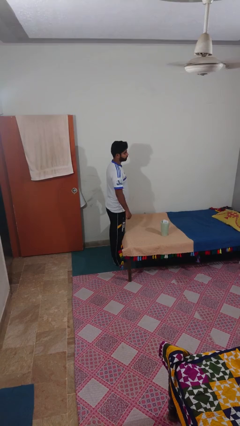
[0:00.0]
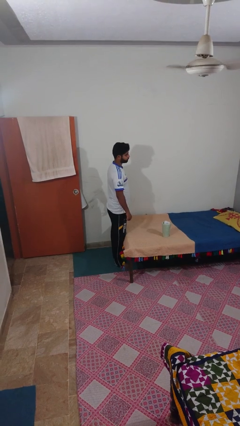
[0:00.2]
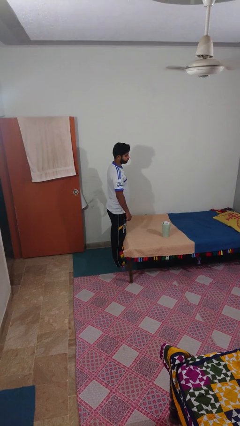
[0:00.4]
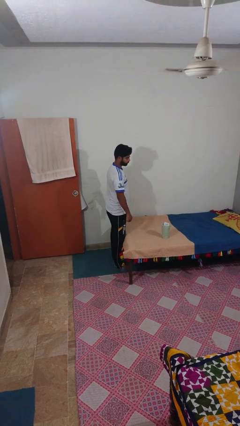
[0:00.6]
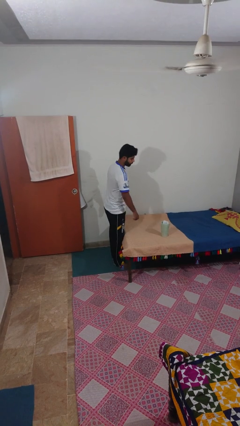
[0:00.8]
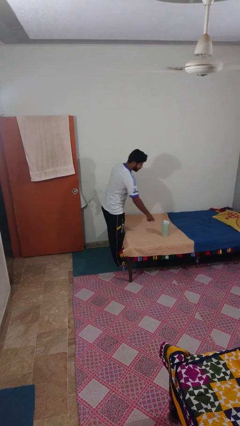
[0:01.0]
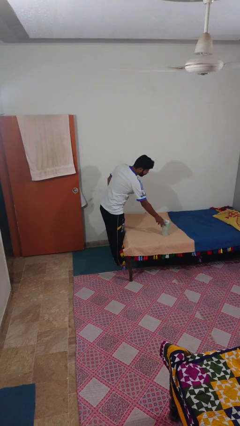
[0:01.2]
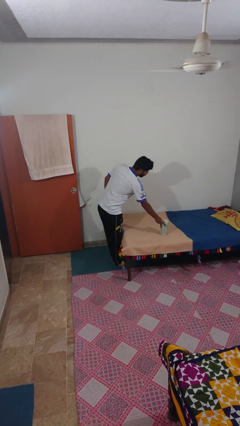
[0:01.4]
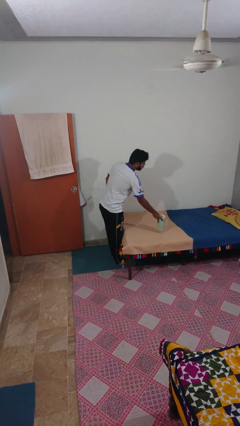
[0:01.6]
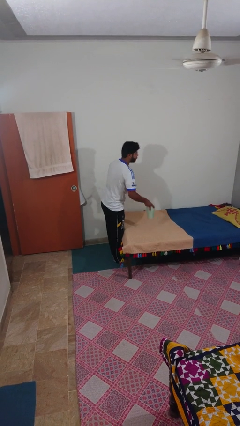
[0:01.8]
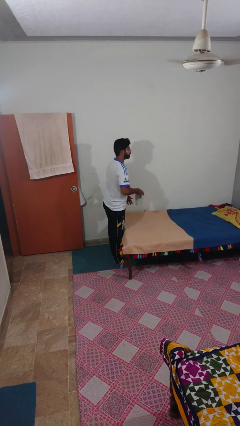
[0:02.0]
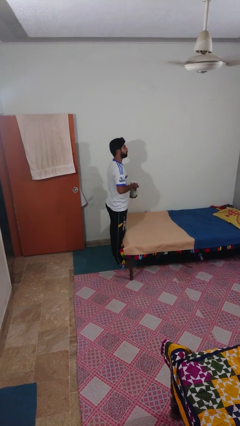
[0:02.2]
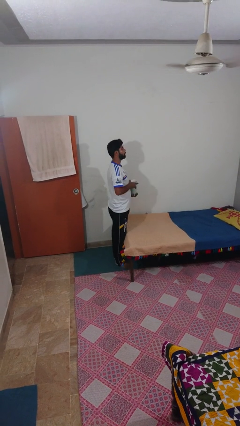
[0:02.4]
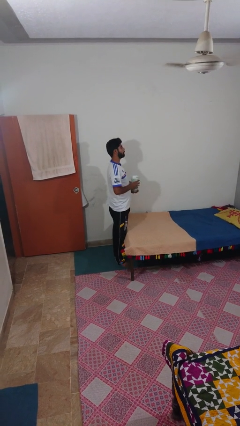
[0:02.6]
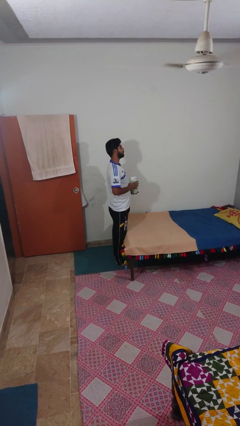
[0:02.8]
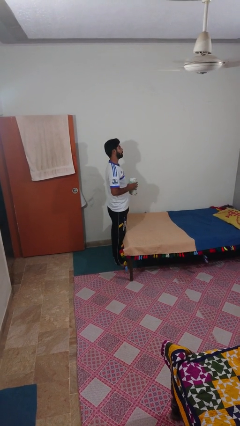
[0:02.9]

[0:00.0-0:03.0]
person picks up object from bed

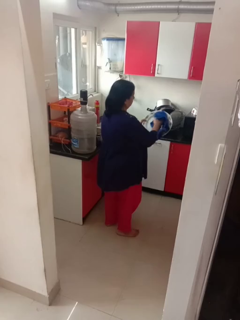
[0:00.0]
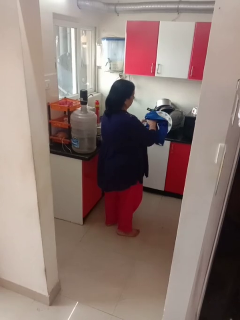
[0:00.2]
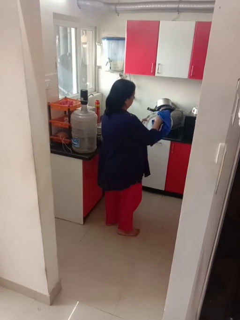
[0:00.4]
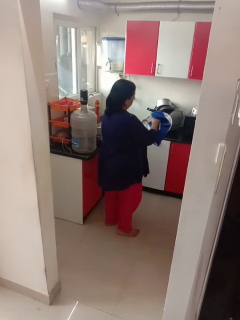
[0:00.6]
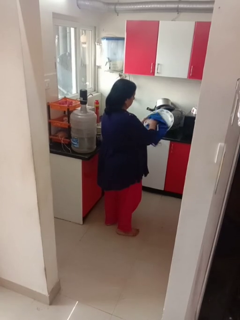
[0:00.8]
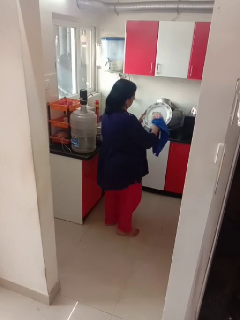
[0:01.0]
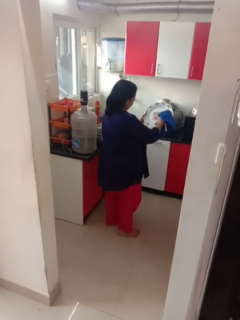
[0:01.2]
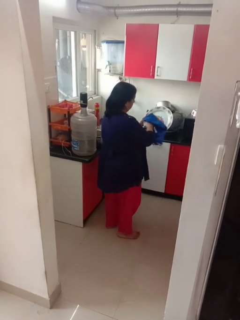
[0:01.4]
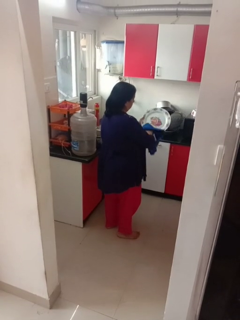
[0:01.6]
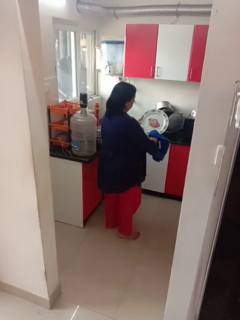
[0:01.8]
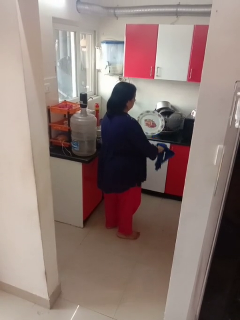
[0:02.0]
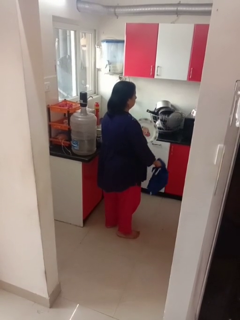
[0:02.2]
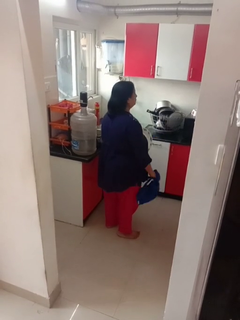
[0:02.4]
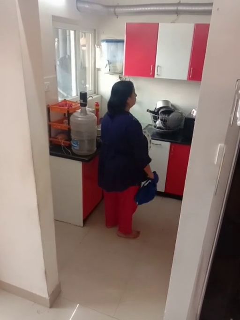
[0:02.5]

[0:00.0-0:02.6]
person dries dish

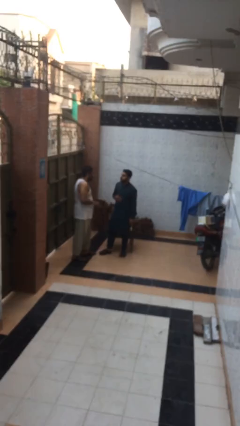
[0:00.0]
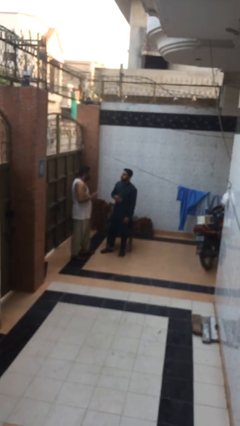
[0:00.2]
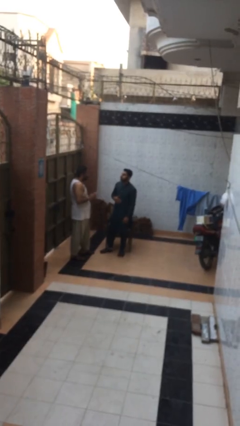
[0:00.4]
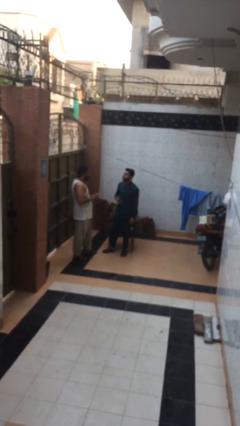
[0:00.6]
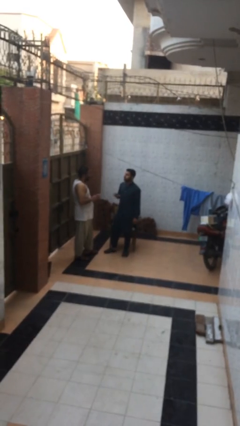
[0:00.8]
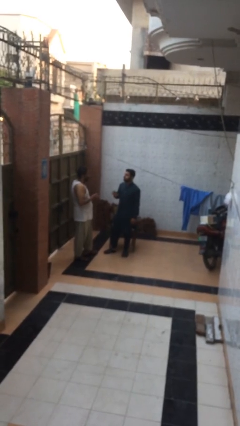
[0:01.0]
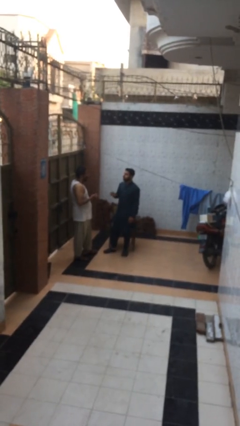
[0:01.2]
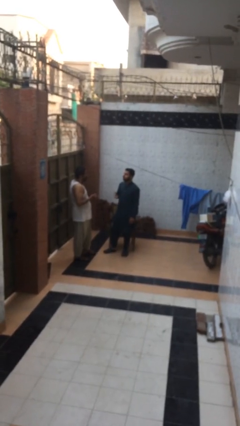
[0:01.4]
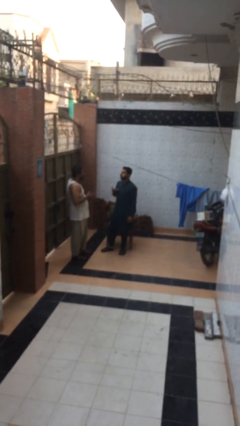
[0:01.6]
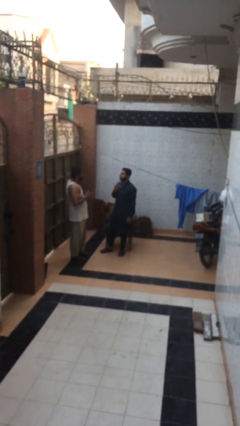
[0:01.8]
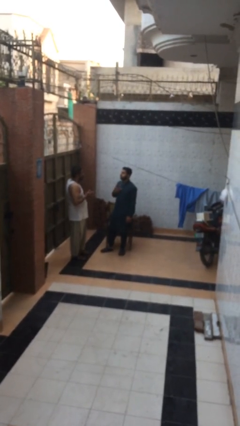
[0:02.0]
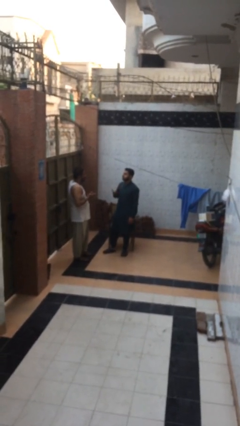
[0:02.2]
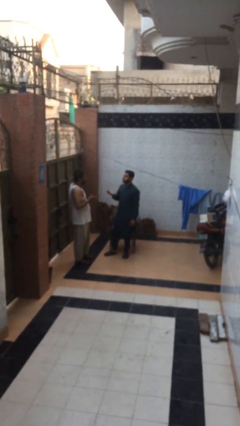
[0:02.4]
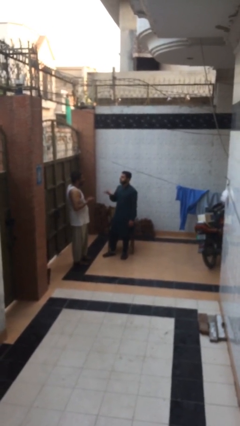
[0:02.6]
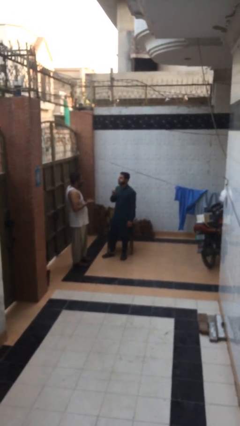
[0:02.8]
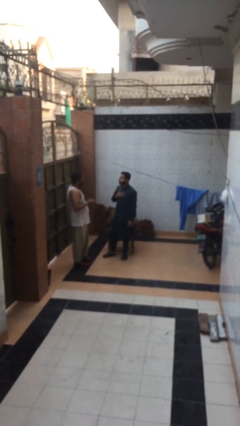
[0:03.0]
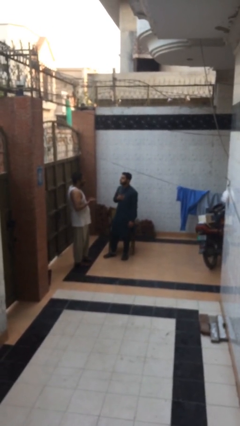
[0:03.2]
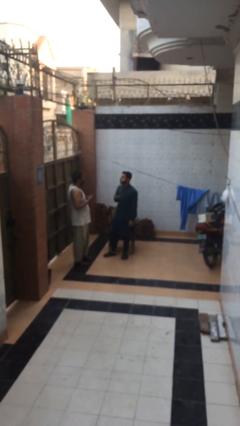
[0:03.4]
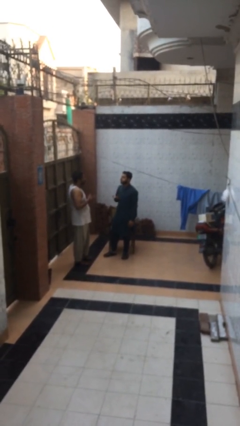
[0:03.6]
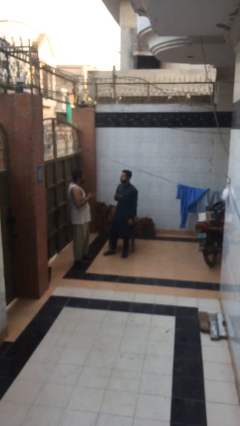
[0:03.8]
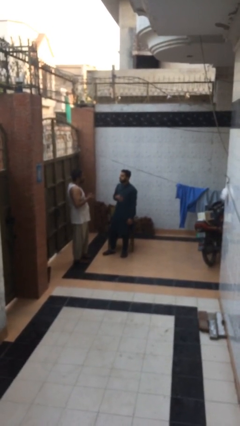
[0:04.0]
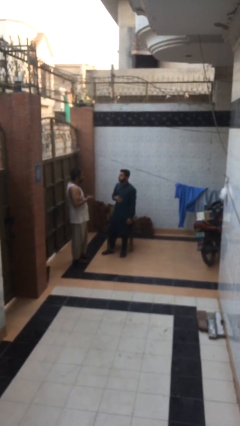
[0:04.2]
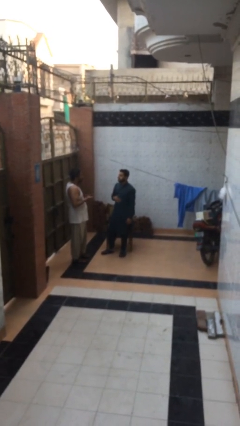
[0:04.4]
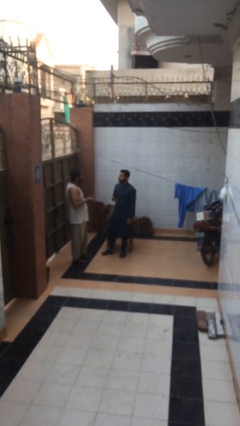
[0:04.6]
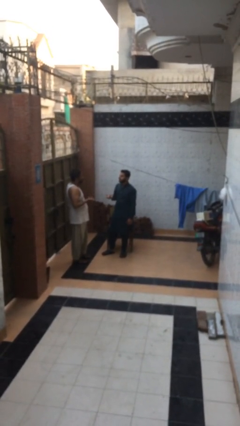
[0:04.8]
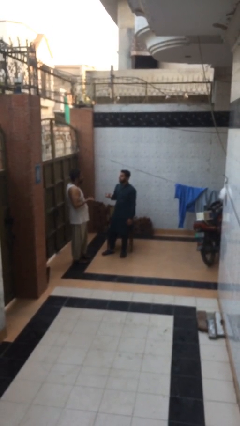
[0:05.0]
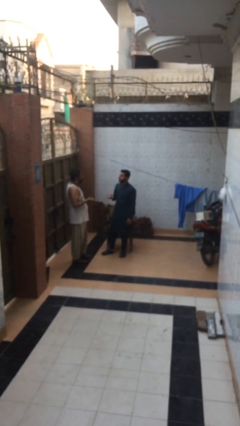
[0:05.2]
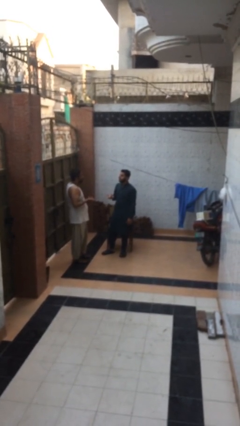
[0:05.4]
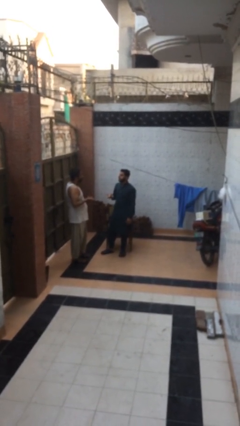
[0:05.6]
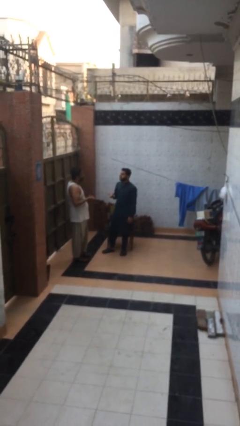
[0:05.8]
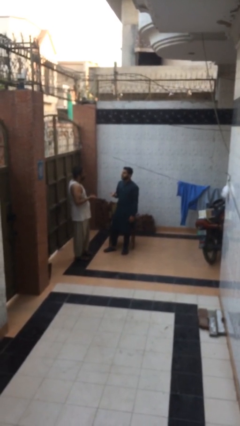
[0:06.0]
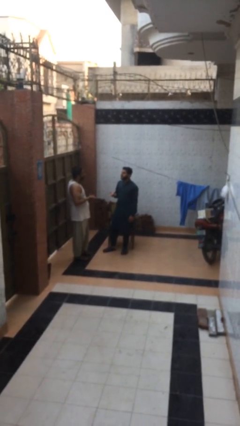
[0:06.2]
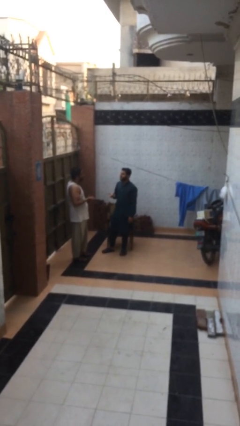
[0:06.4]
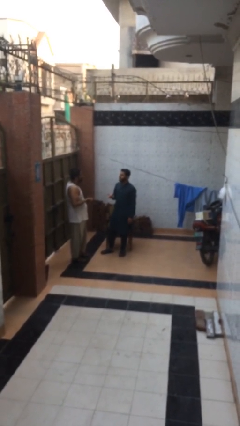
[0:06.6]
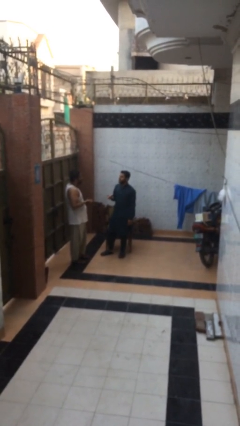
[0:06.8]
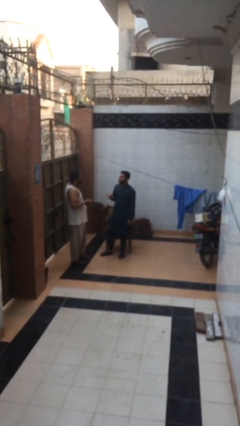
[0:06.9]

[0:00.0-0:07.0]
person talks to person

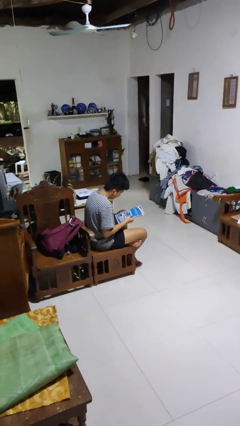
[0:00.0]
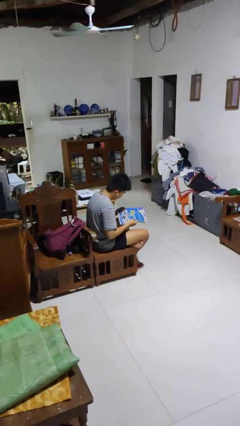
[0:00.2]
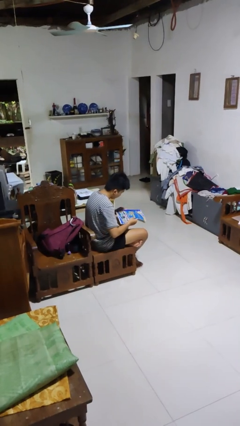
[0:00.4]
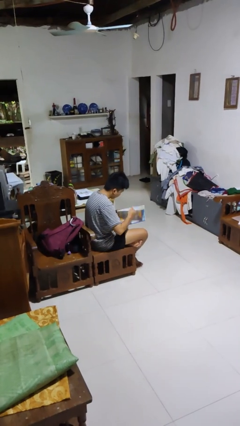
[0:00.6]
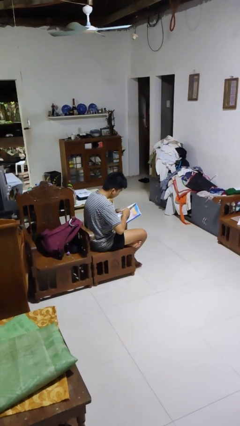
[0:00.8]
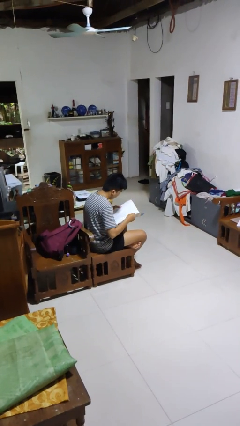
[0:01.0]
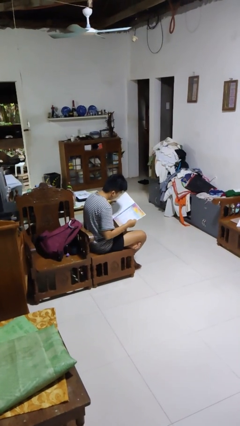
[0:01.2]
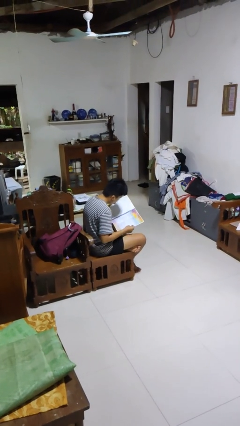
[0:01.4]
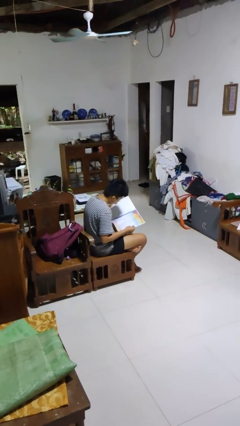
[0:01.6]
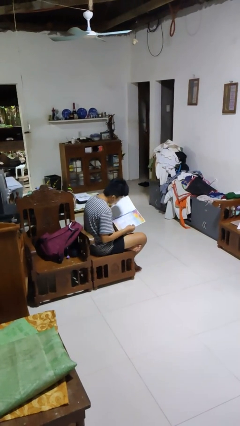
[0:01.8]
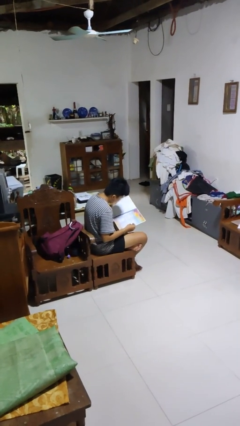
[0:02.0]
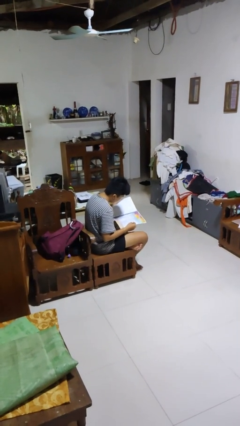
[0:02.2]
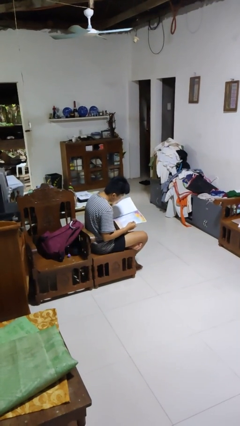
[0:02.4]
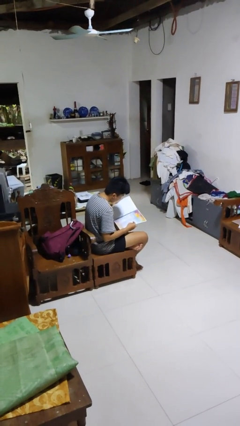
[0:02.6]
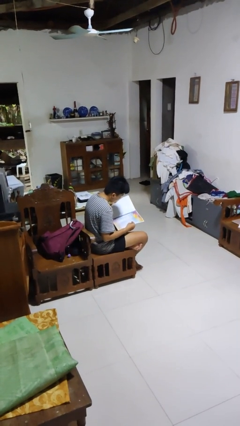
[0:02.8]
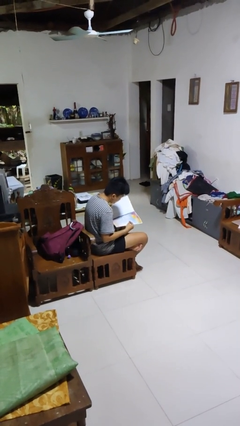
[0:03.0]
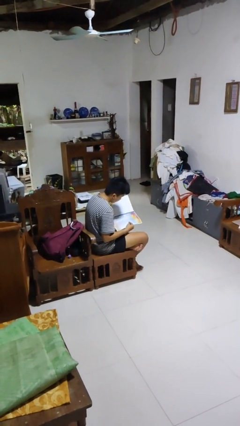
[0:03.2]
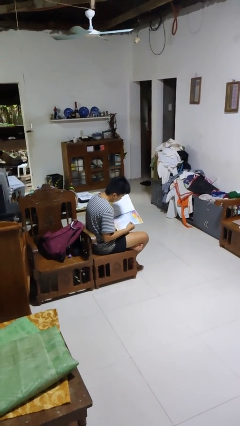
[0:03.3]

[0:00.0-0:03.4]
person reads magazine

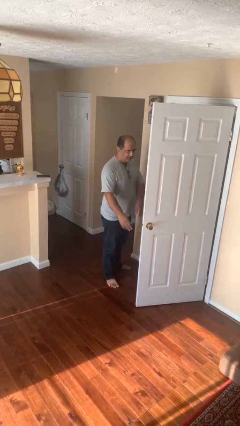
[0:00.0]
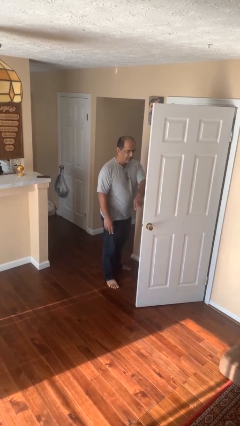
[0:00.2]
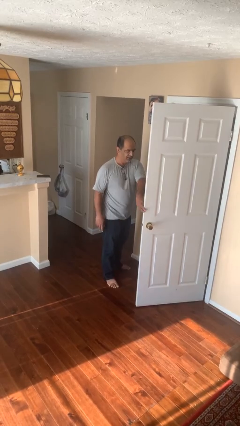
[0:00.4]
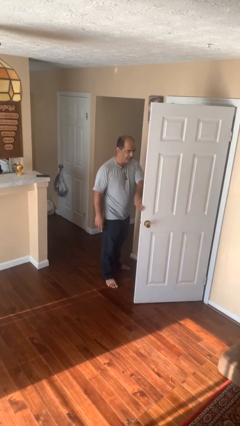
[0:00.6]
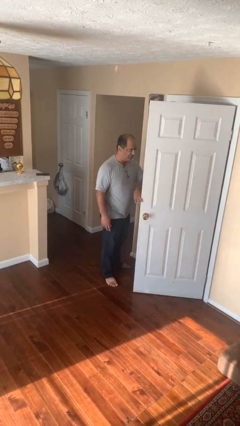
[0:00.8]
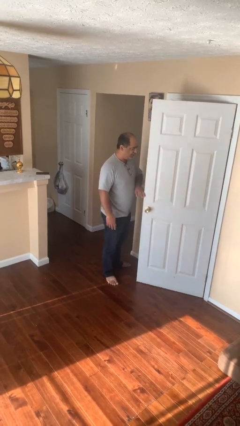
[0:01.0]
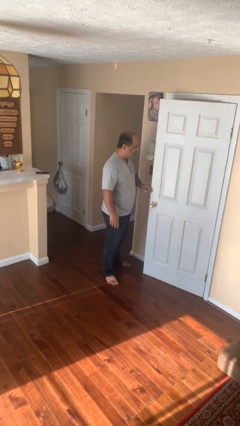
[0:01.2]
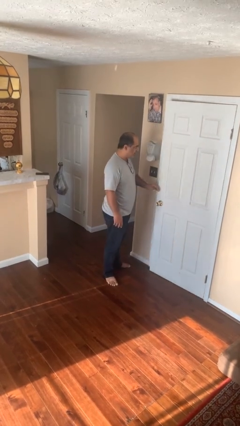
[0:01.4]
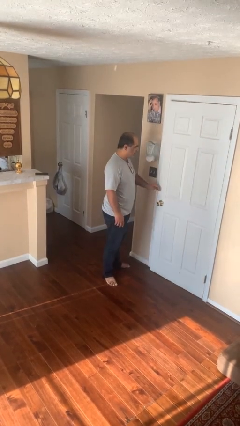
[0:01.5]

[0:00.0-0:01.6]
person closes facility door

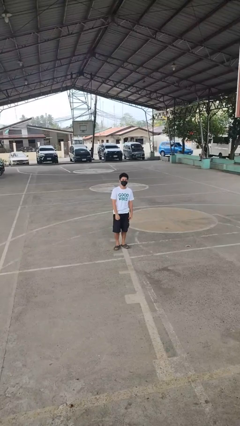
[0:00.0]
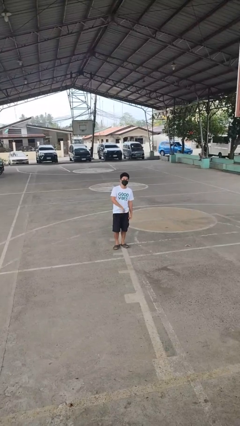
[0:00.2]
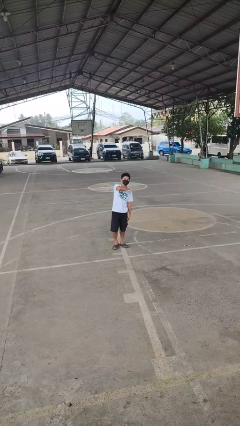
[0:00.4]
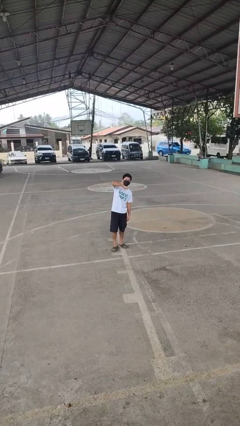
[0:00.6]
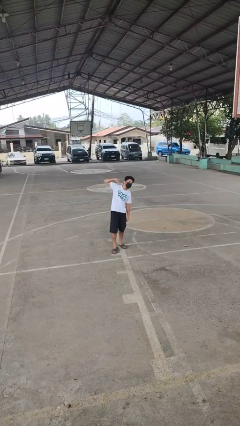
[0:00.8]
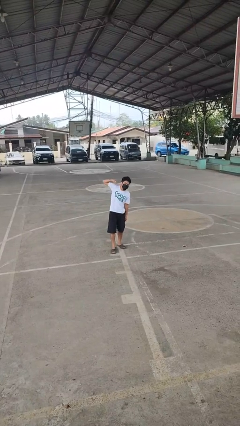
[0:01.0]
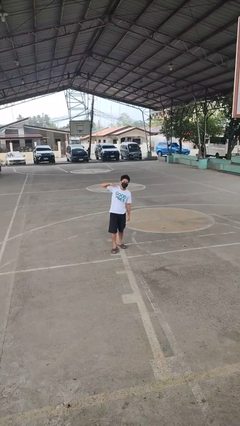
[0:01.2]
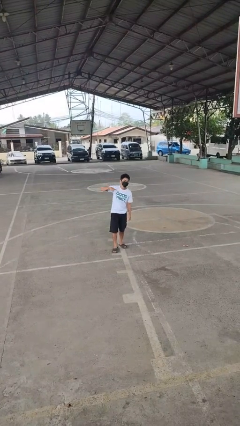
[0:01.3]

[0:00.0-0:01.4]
person gestures cut
